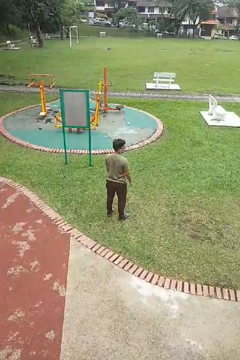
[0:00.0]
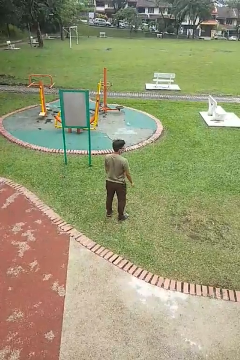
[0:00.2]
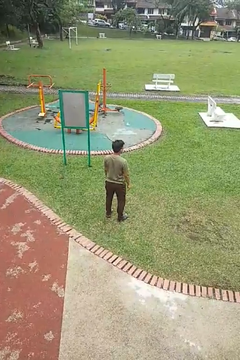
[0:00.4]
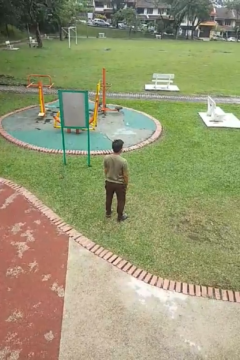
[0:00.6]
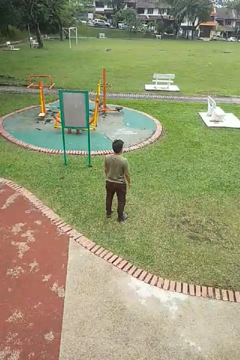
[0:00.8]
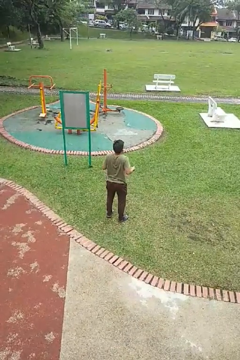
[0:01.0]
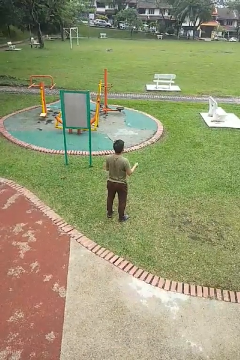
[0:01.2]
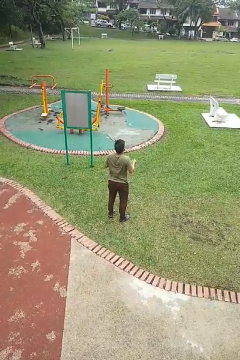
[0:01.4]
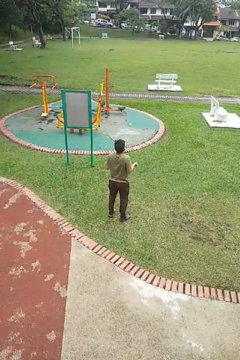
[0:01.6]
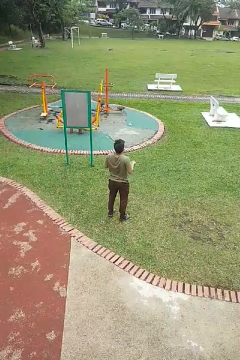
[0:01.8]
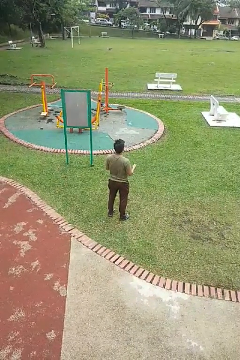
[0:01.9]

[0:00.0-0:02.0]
person shrugs

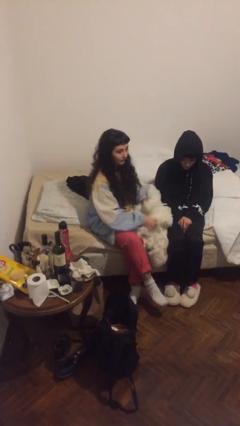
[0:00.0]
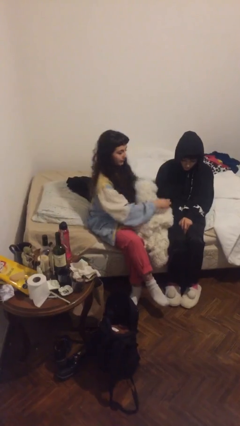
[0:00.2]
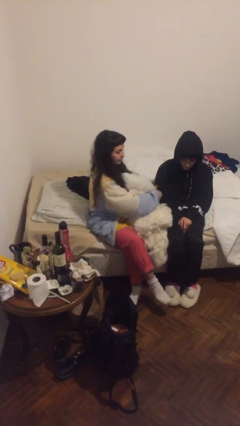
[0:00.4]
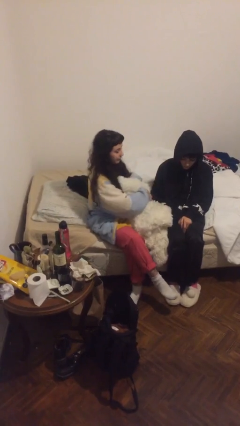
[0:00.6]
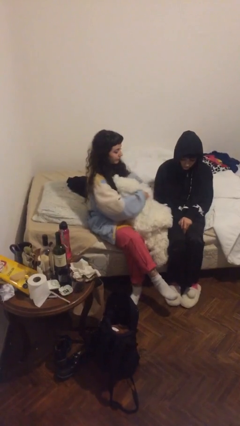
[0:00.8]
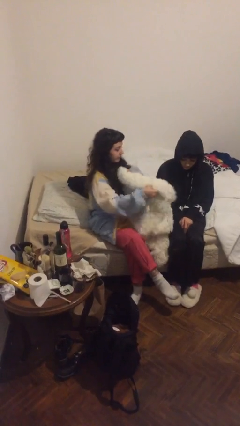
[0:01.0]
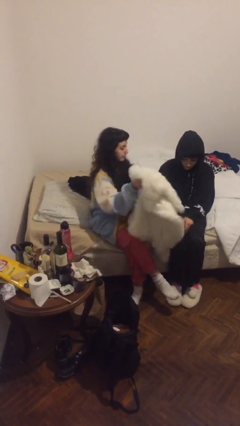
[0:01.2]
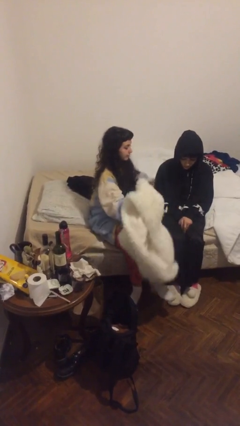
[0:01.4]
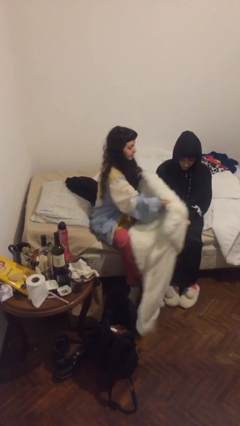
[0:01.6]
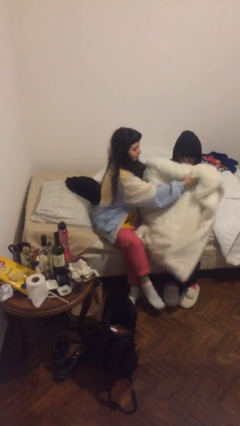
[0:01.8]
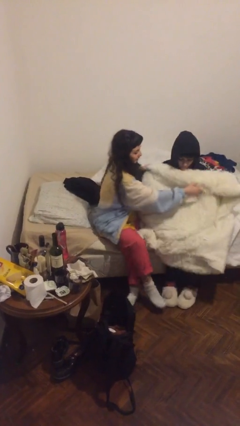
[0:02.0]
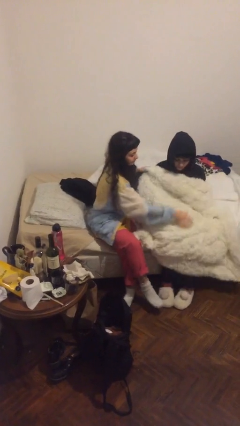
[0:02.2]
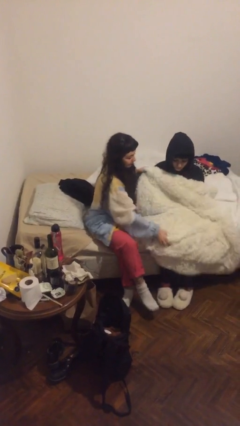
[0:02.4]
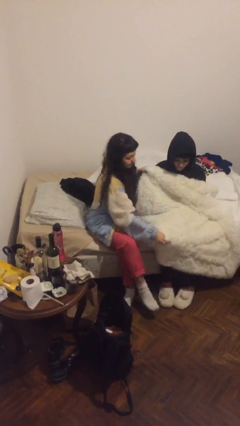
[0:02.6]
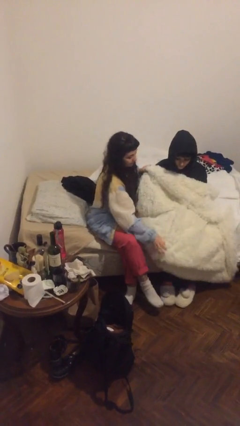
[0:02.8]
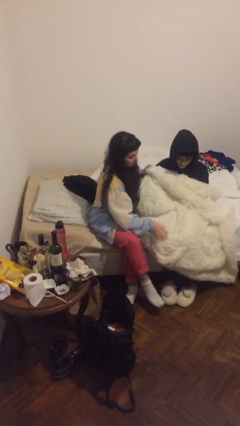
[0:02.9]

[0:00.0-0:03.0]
person covers friend with blanket

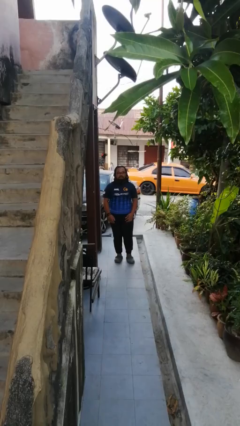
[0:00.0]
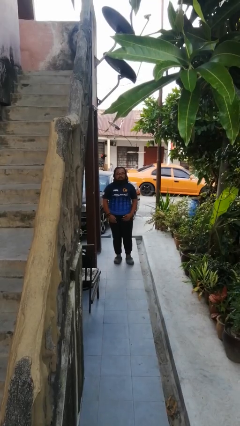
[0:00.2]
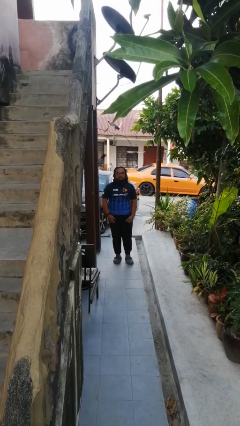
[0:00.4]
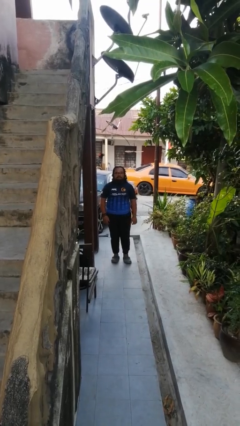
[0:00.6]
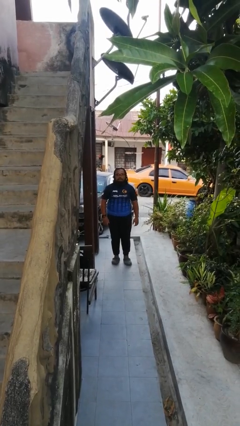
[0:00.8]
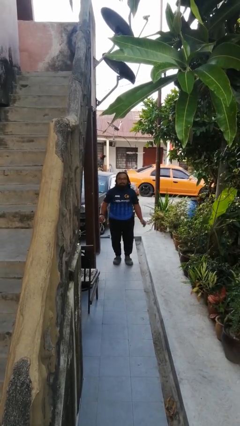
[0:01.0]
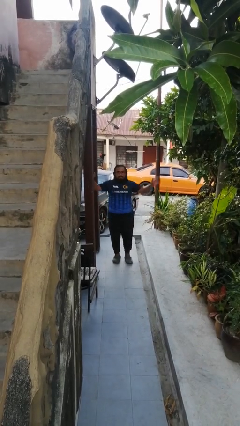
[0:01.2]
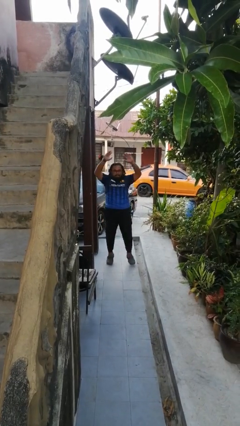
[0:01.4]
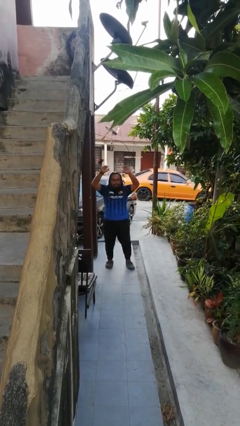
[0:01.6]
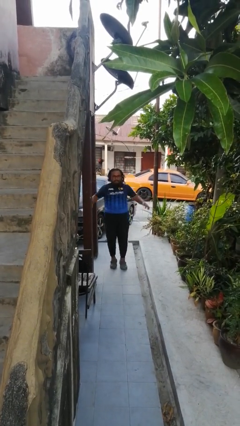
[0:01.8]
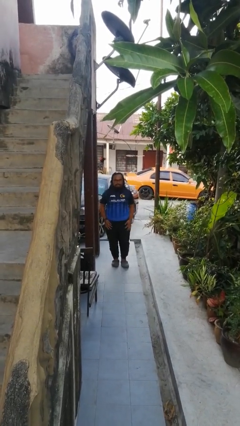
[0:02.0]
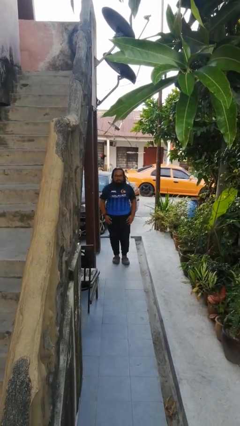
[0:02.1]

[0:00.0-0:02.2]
person exercises with jumping jacks

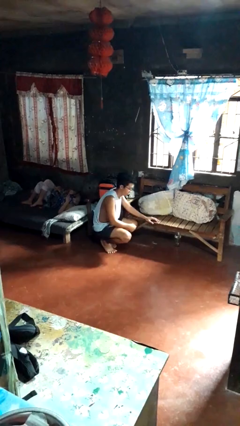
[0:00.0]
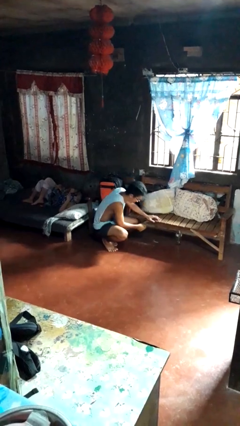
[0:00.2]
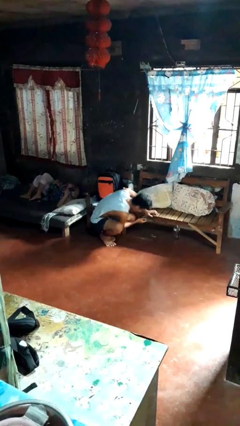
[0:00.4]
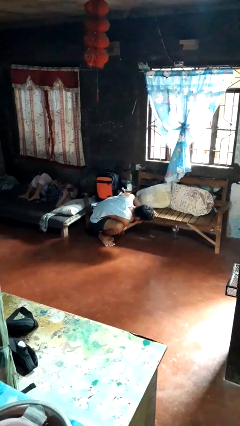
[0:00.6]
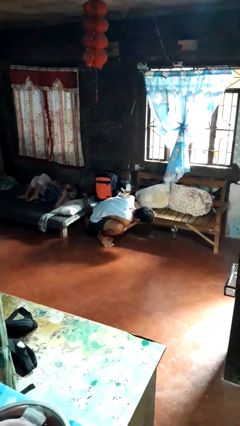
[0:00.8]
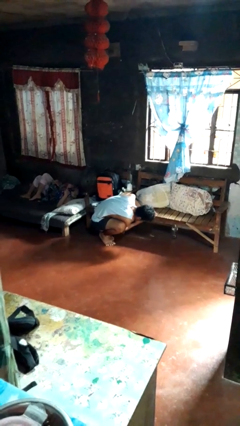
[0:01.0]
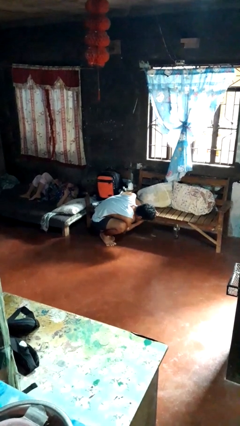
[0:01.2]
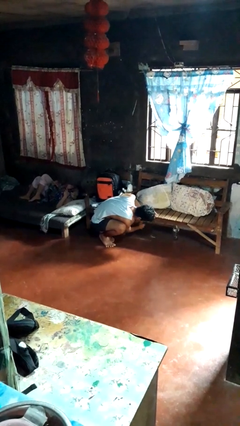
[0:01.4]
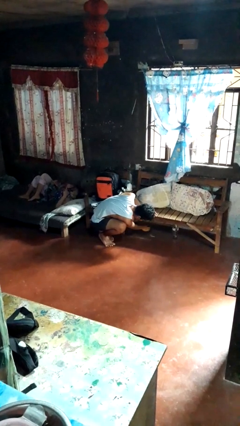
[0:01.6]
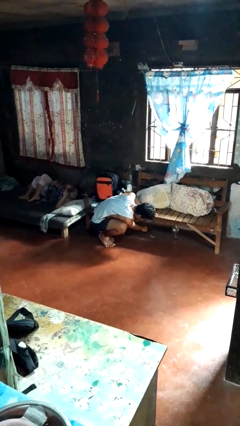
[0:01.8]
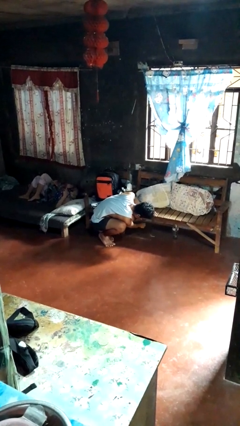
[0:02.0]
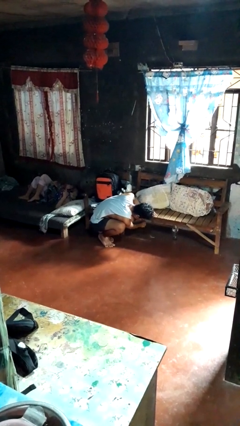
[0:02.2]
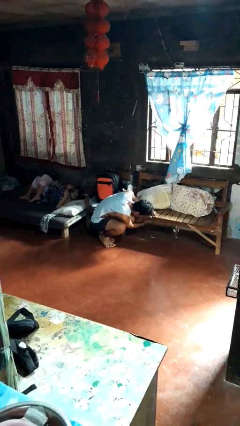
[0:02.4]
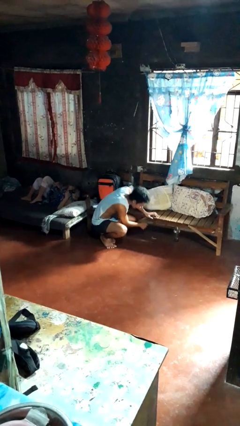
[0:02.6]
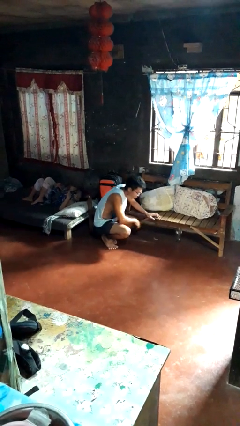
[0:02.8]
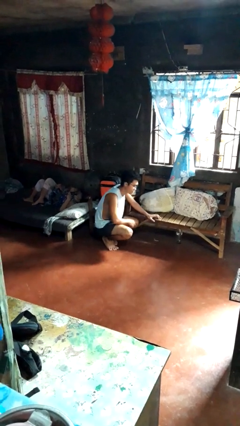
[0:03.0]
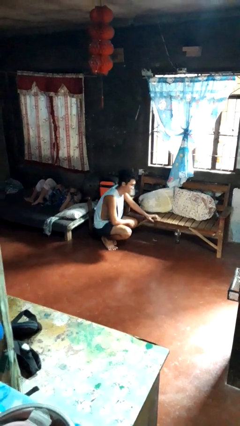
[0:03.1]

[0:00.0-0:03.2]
person searches under couch

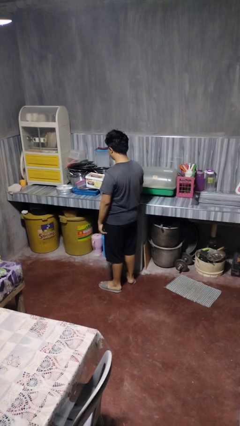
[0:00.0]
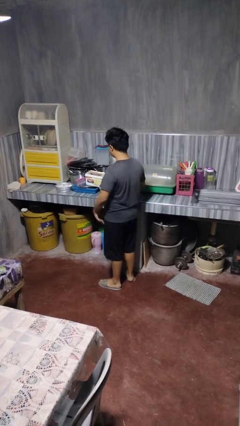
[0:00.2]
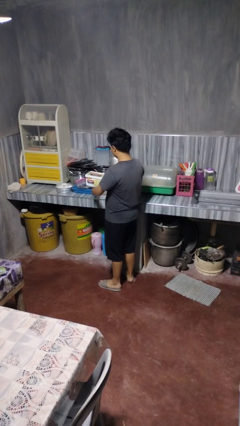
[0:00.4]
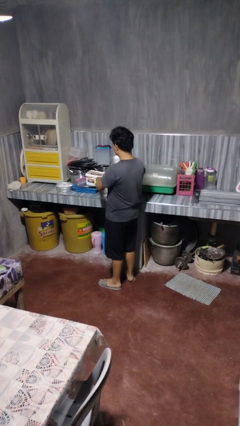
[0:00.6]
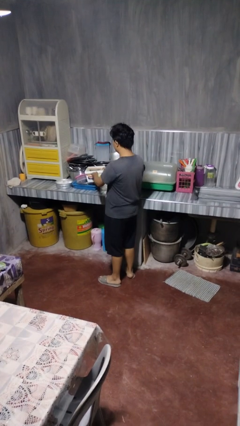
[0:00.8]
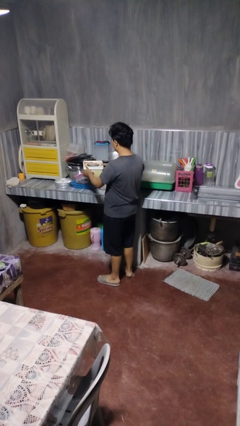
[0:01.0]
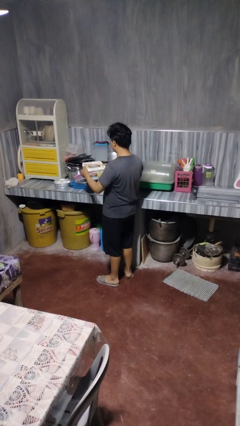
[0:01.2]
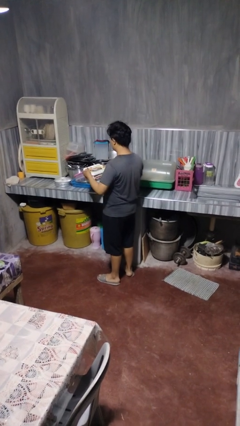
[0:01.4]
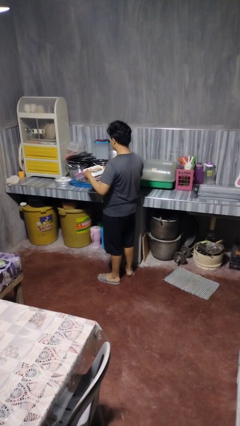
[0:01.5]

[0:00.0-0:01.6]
person picks up object from countertop

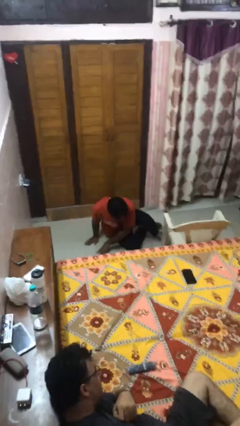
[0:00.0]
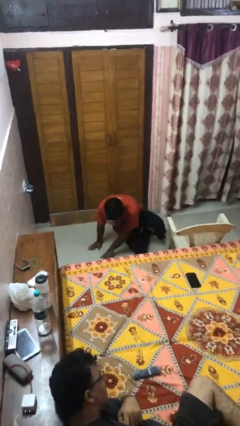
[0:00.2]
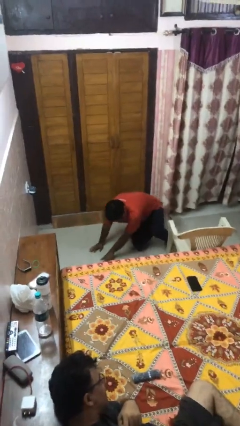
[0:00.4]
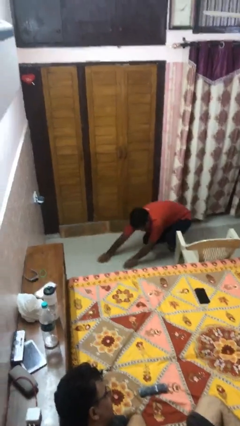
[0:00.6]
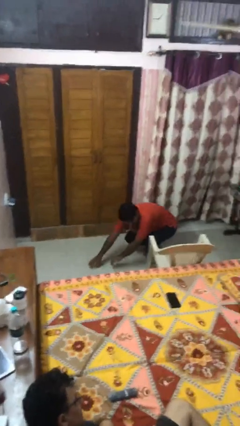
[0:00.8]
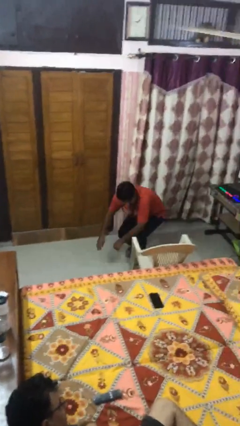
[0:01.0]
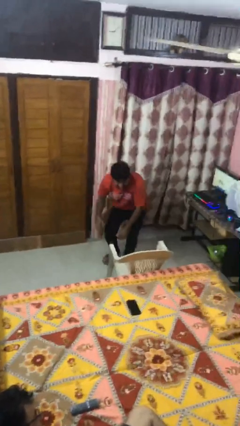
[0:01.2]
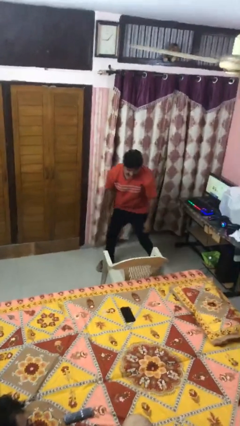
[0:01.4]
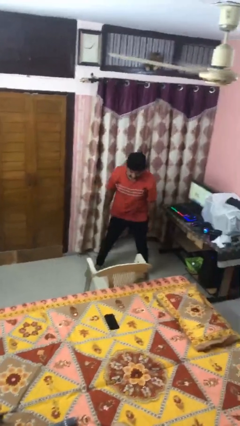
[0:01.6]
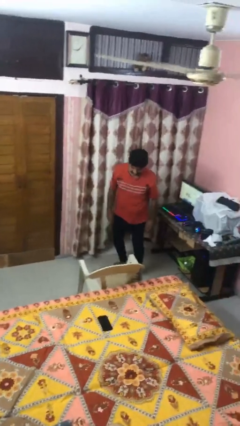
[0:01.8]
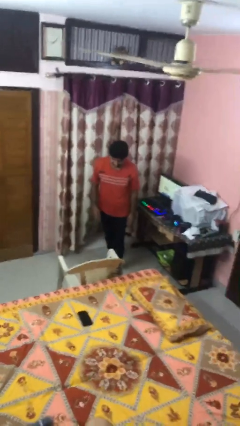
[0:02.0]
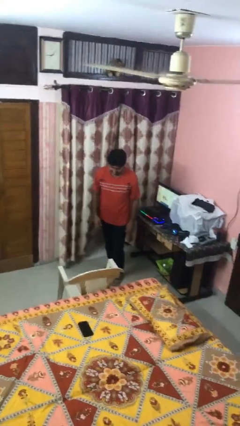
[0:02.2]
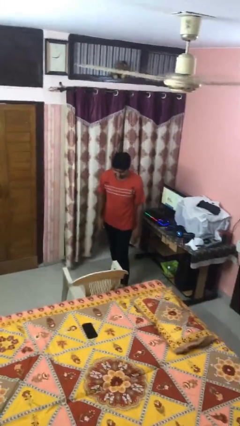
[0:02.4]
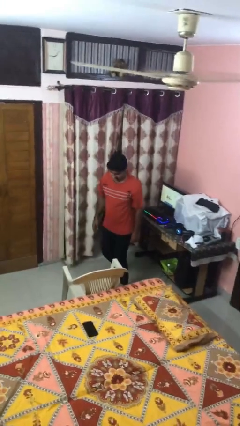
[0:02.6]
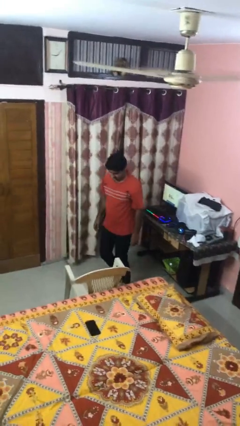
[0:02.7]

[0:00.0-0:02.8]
person stands up from floor

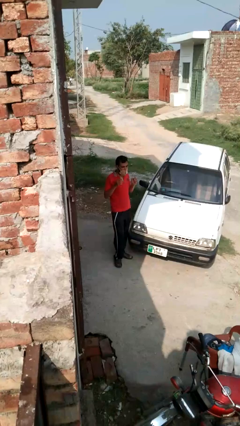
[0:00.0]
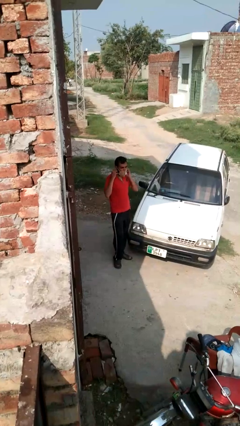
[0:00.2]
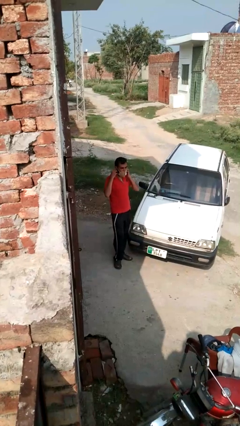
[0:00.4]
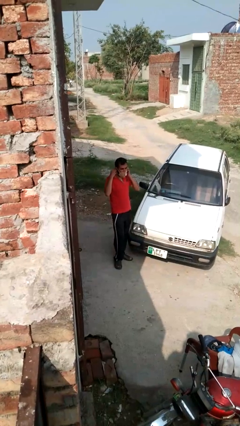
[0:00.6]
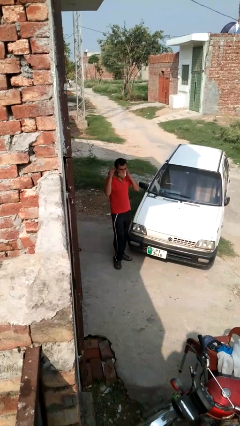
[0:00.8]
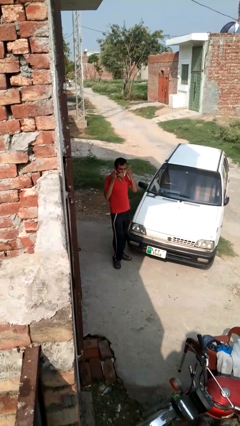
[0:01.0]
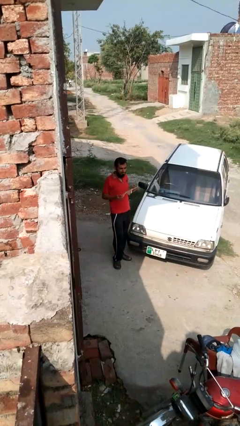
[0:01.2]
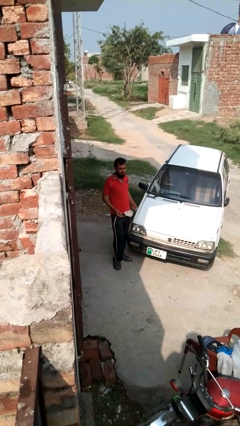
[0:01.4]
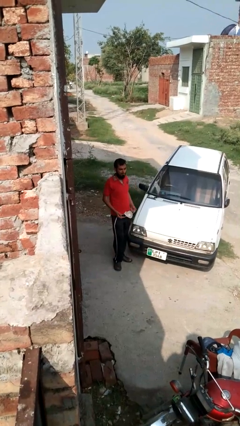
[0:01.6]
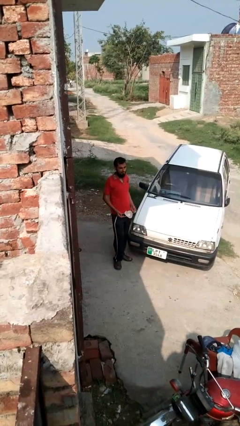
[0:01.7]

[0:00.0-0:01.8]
person takes off facemask

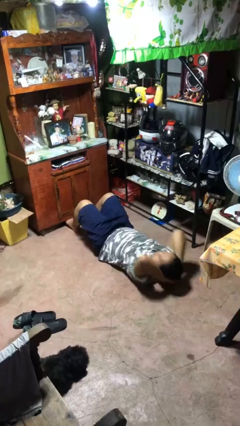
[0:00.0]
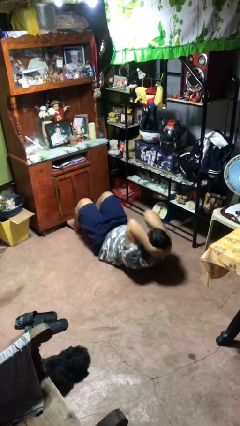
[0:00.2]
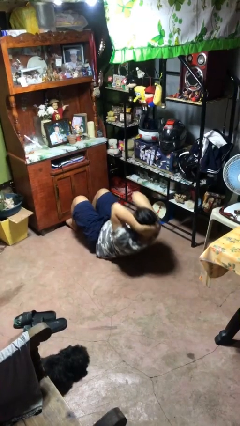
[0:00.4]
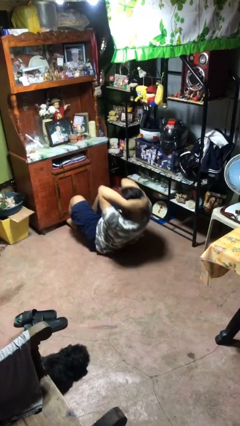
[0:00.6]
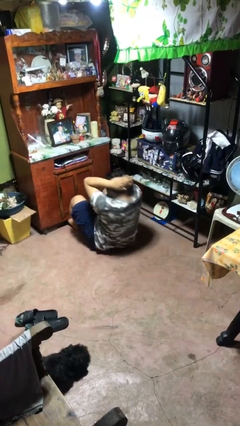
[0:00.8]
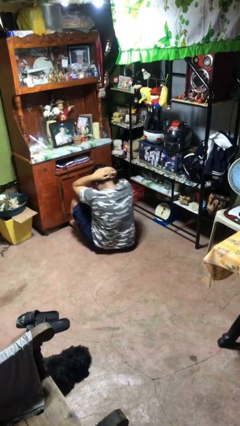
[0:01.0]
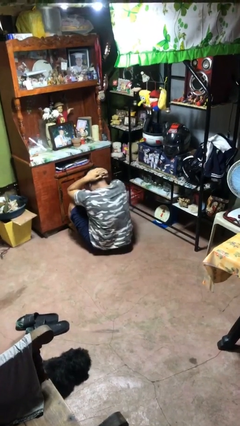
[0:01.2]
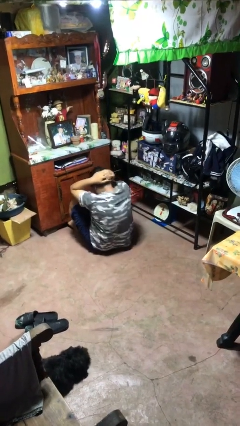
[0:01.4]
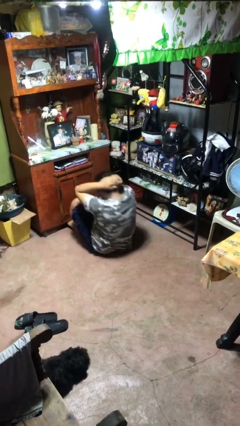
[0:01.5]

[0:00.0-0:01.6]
person exercises with situp
